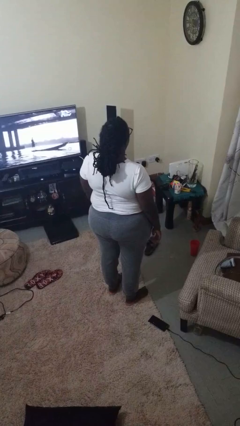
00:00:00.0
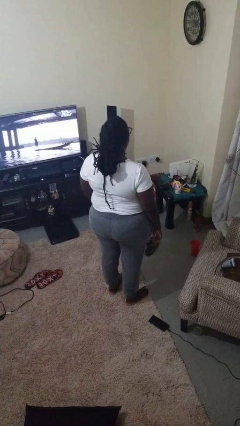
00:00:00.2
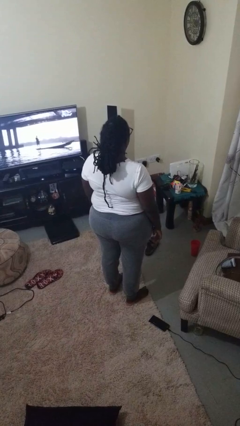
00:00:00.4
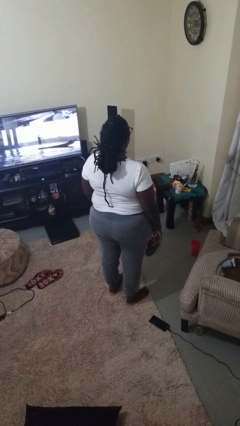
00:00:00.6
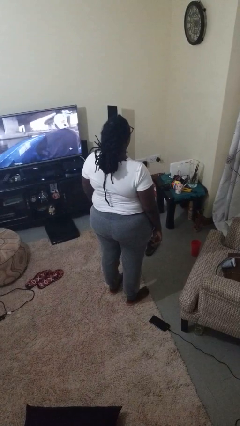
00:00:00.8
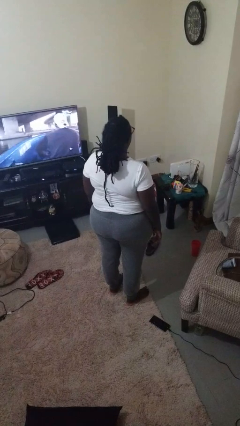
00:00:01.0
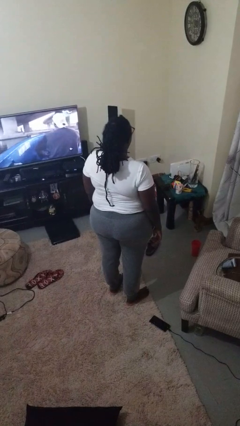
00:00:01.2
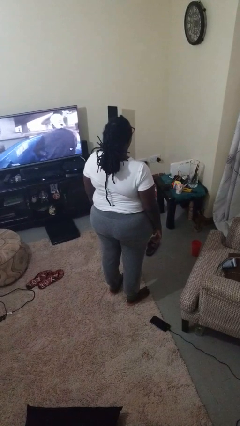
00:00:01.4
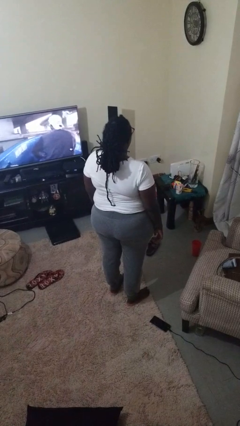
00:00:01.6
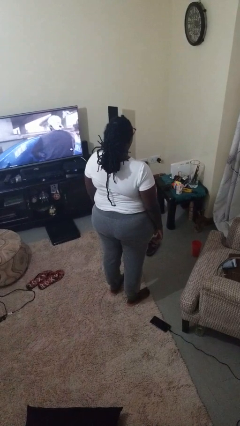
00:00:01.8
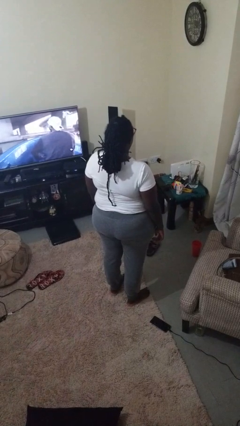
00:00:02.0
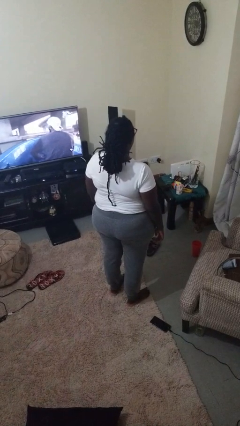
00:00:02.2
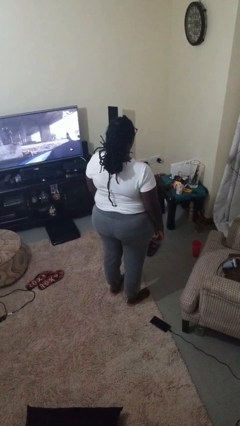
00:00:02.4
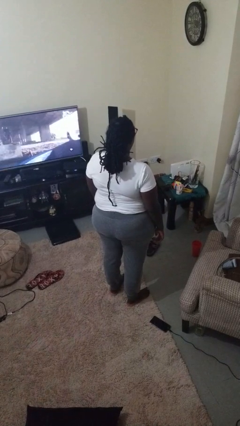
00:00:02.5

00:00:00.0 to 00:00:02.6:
person slaps hands on thighs

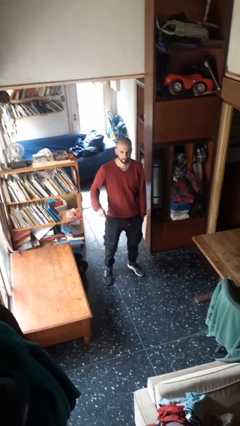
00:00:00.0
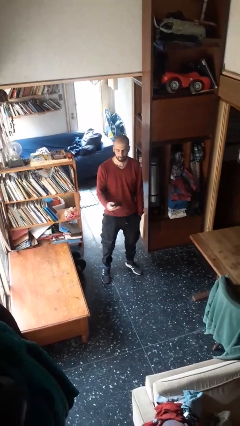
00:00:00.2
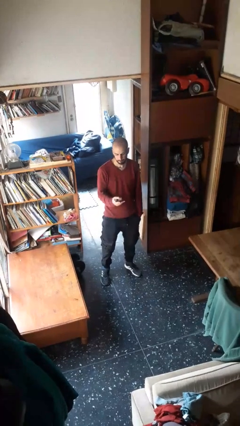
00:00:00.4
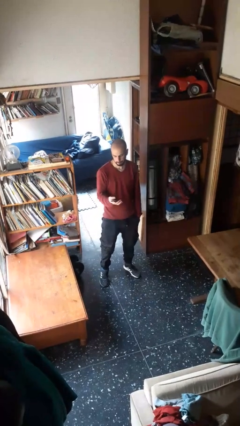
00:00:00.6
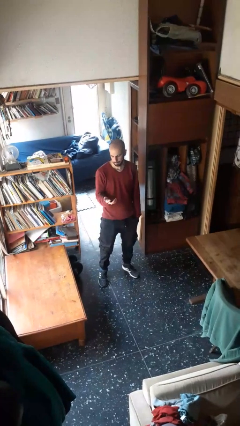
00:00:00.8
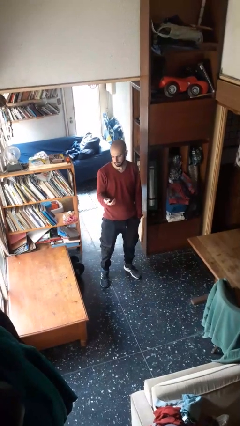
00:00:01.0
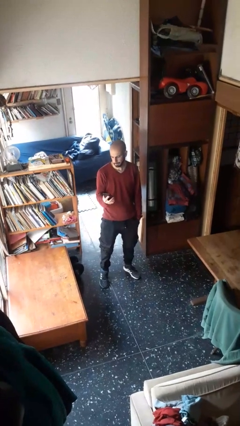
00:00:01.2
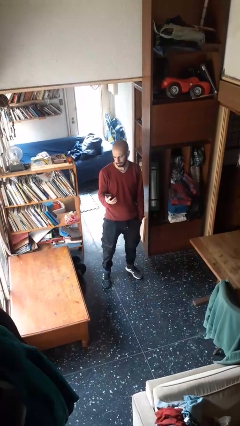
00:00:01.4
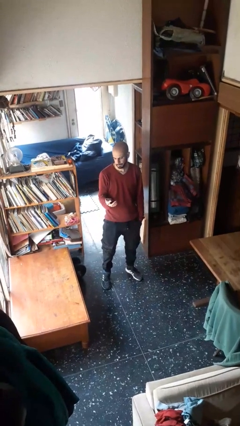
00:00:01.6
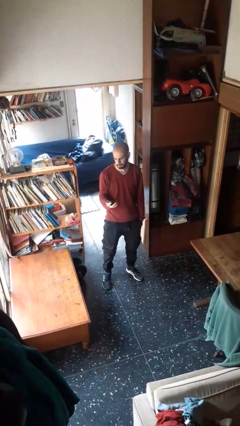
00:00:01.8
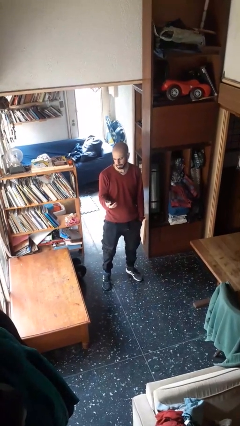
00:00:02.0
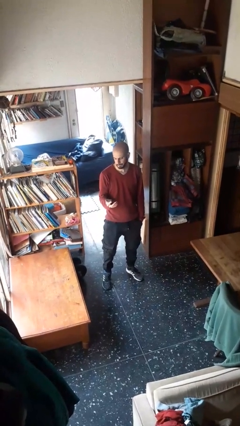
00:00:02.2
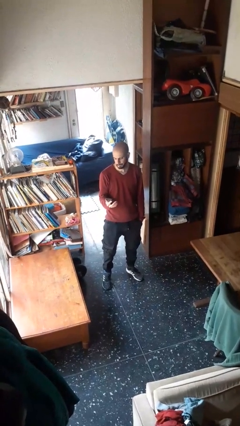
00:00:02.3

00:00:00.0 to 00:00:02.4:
person takes phone from pocket

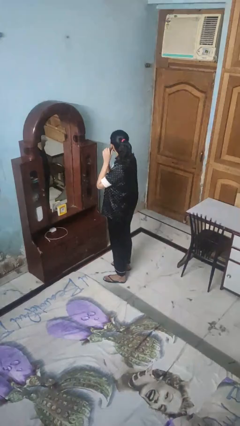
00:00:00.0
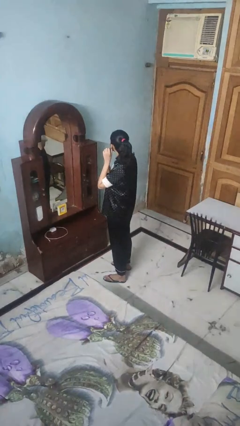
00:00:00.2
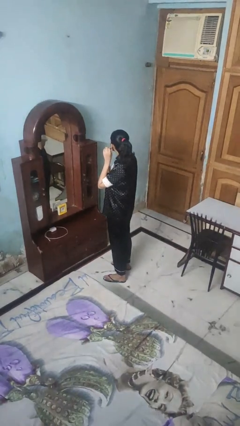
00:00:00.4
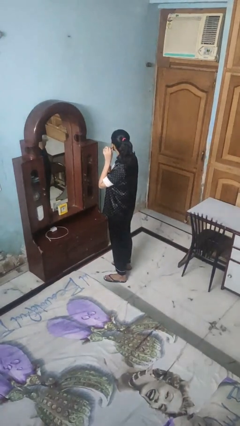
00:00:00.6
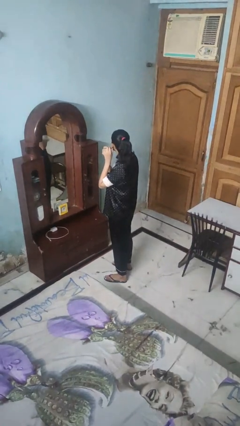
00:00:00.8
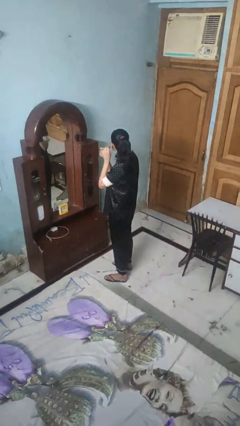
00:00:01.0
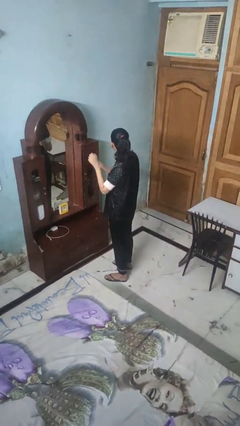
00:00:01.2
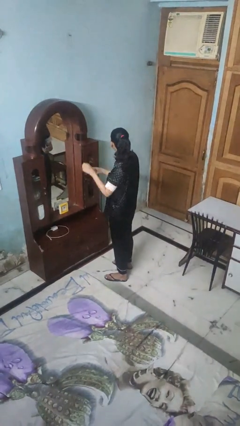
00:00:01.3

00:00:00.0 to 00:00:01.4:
person takes off earrings

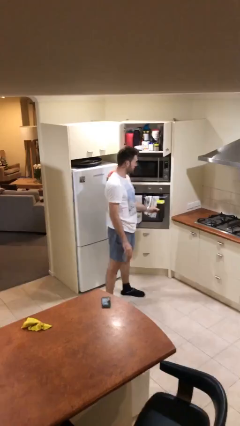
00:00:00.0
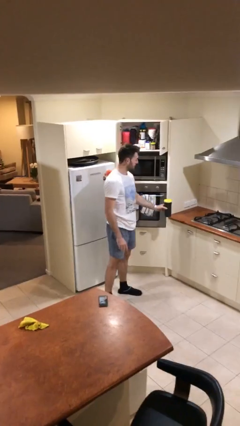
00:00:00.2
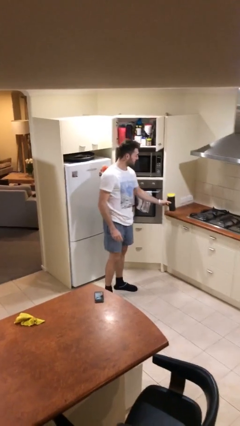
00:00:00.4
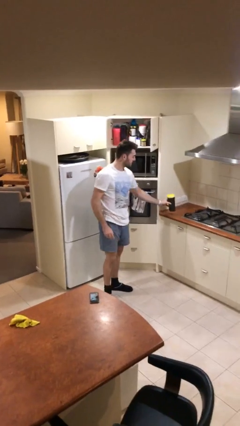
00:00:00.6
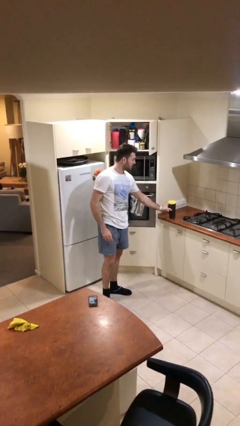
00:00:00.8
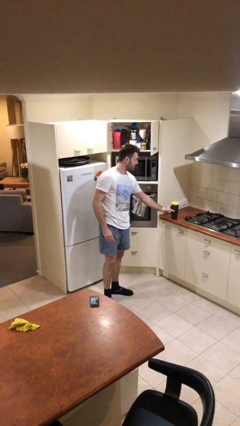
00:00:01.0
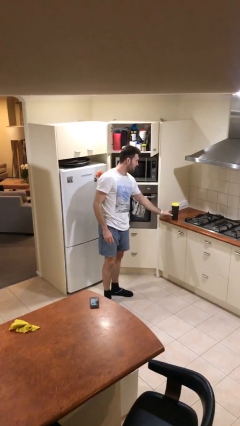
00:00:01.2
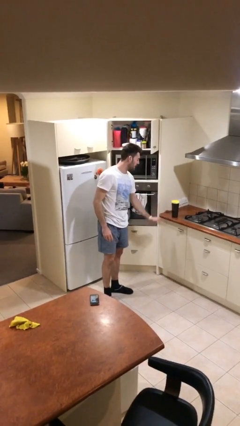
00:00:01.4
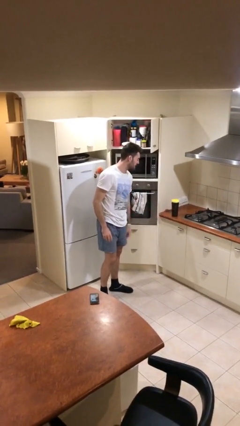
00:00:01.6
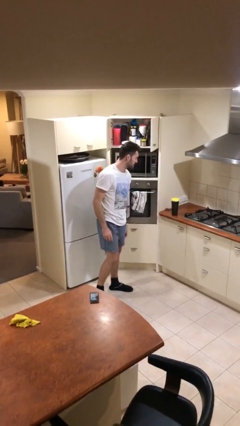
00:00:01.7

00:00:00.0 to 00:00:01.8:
person puts down object on table

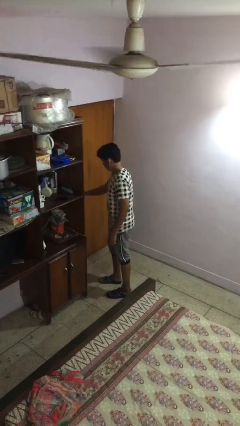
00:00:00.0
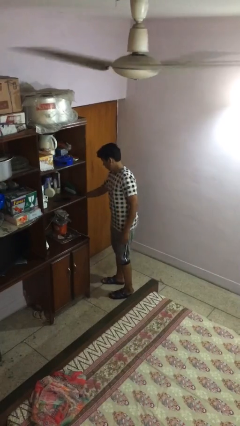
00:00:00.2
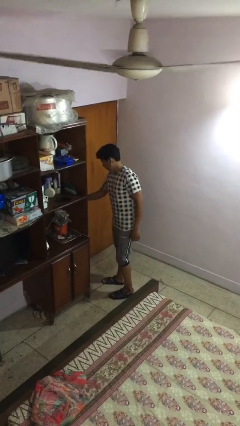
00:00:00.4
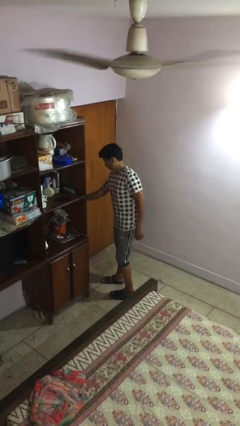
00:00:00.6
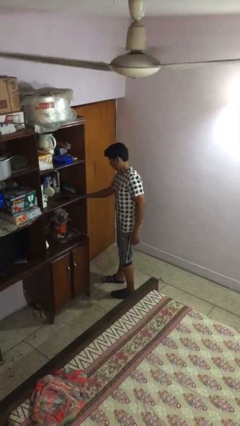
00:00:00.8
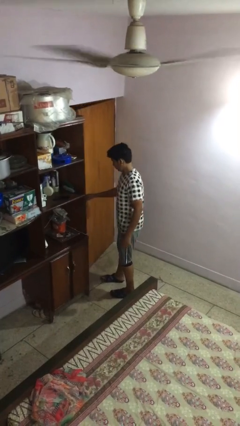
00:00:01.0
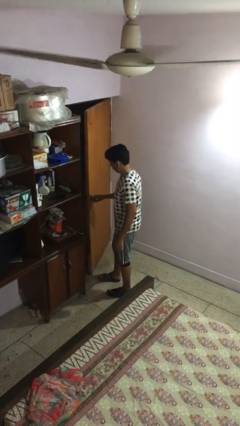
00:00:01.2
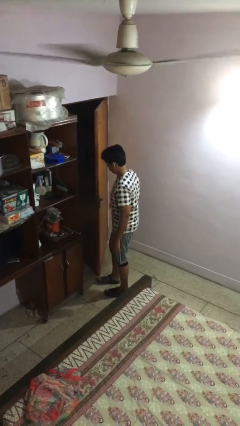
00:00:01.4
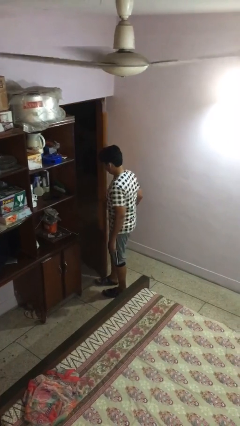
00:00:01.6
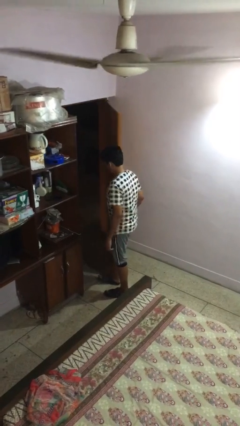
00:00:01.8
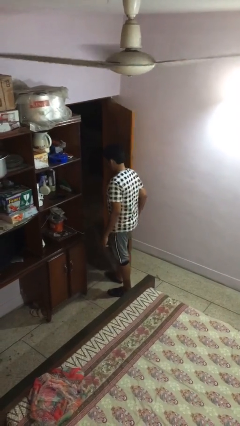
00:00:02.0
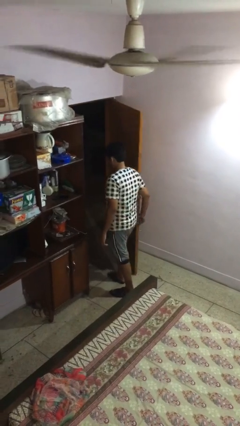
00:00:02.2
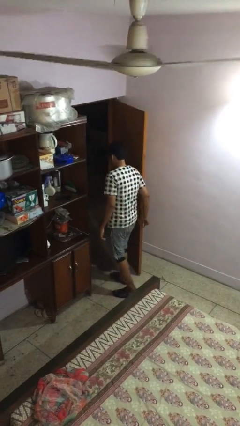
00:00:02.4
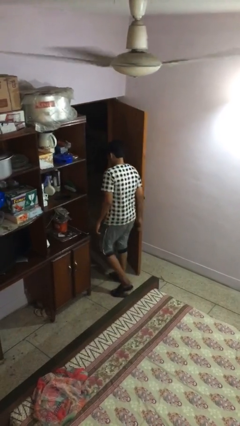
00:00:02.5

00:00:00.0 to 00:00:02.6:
person opens facility door

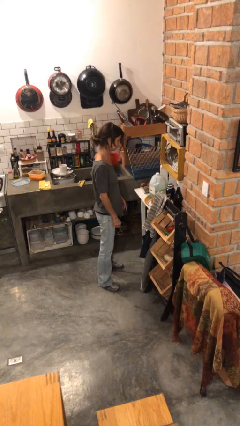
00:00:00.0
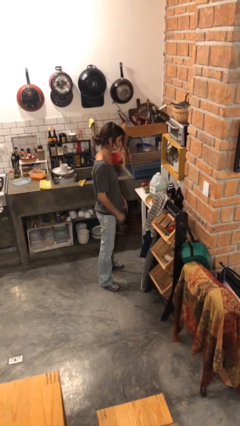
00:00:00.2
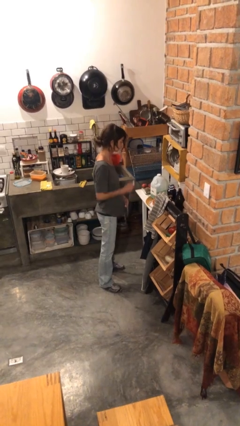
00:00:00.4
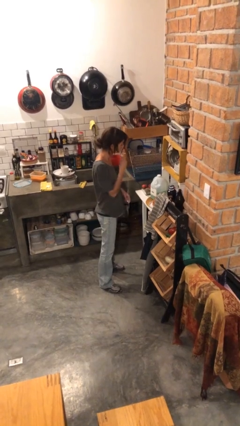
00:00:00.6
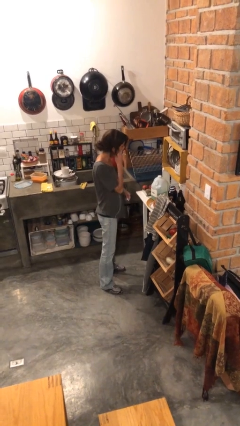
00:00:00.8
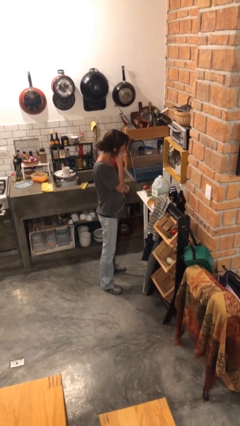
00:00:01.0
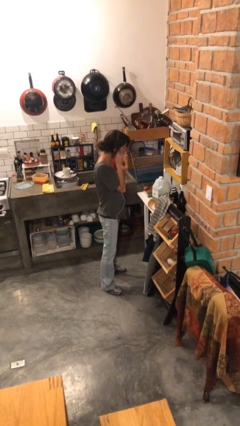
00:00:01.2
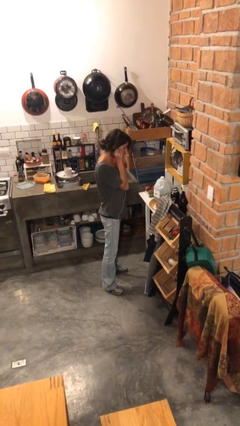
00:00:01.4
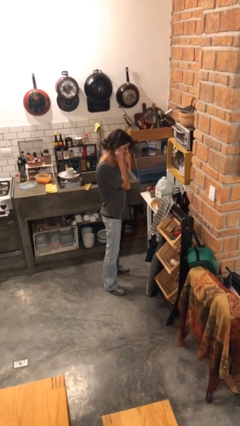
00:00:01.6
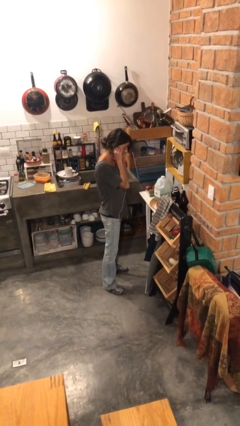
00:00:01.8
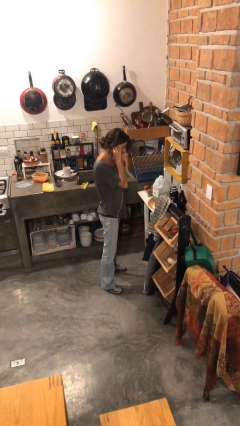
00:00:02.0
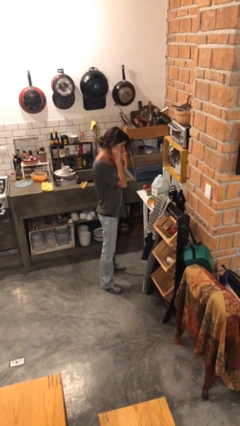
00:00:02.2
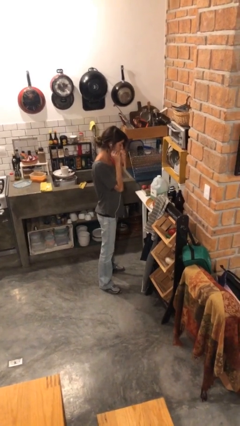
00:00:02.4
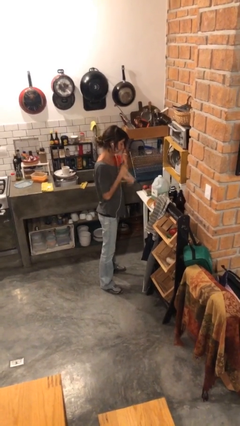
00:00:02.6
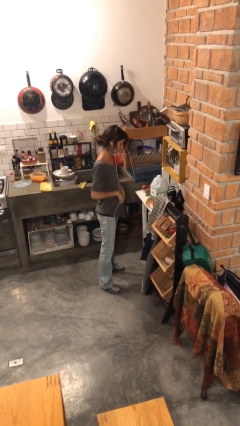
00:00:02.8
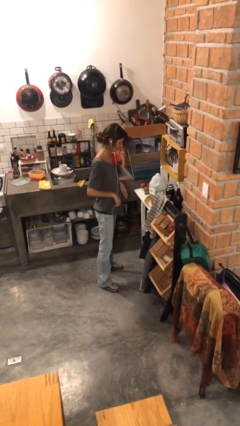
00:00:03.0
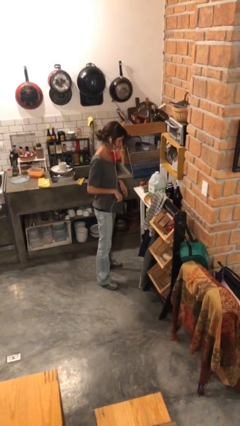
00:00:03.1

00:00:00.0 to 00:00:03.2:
person puts on headphones

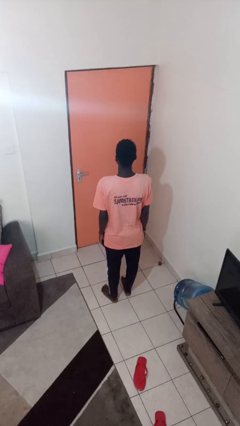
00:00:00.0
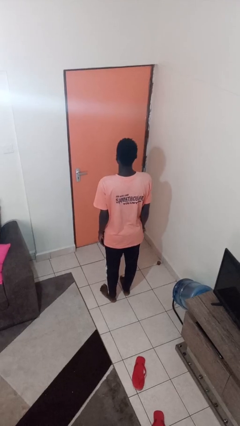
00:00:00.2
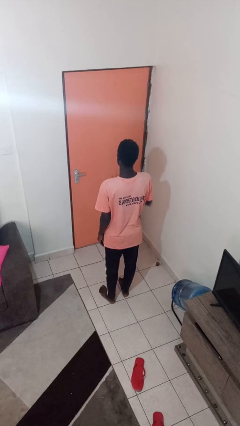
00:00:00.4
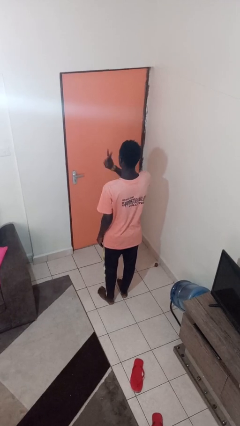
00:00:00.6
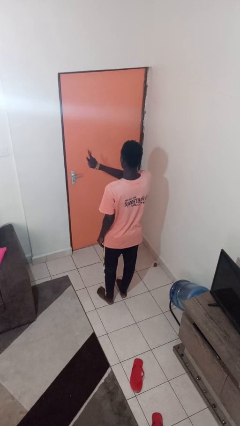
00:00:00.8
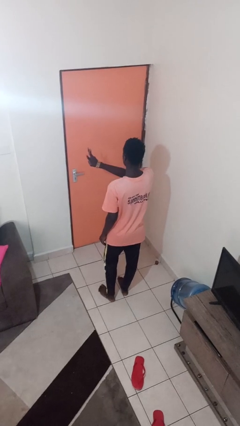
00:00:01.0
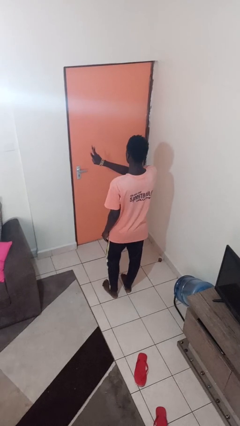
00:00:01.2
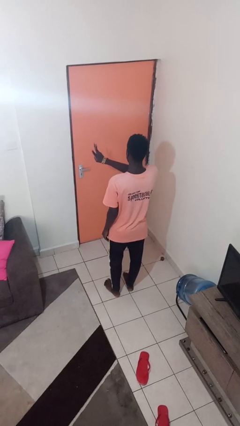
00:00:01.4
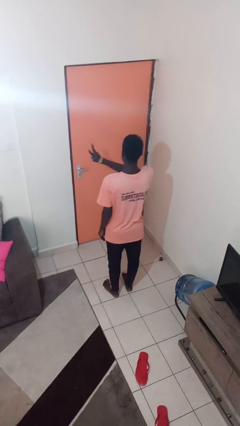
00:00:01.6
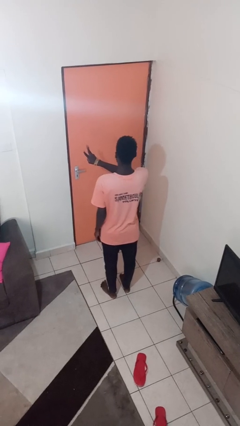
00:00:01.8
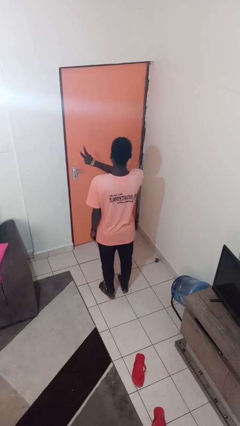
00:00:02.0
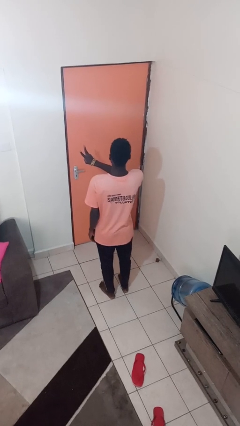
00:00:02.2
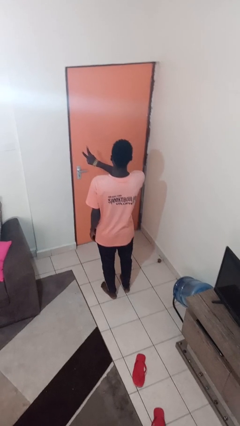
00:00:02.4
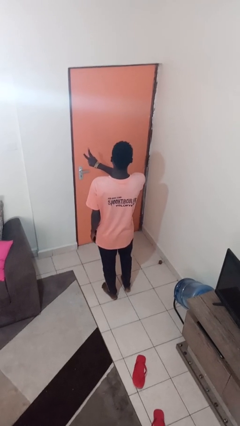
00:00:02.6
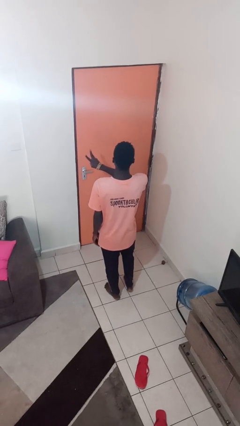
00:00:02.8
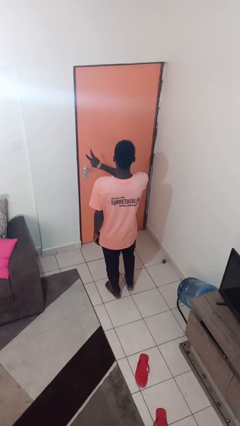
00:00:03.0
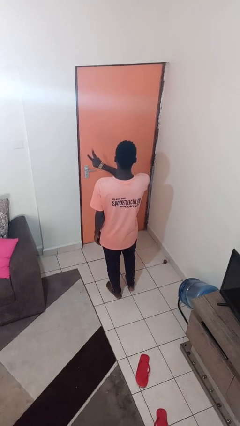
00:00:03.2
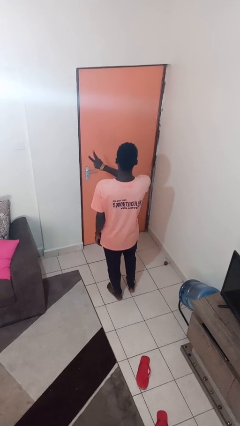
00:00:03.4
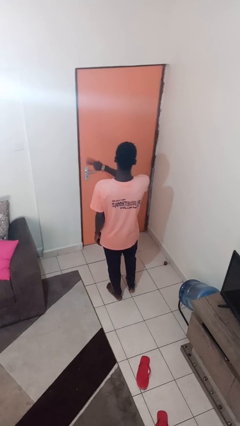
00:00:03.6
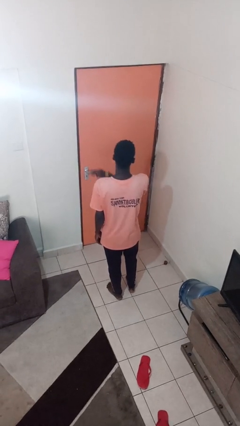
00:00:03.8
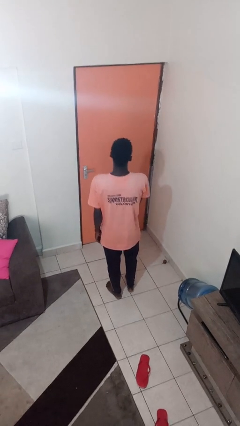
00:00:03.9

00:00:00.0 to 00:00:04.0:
person gestures number three
